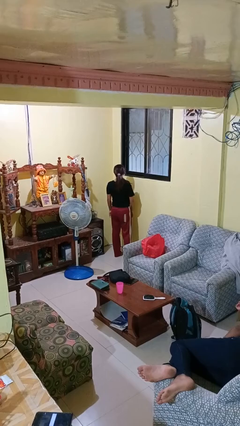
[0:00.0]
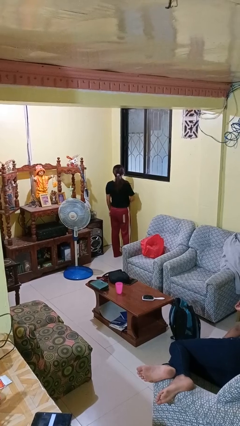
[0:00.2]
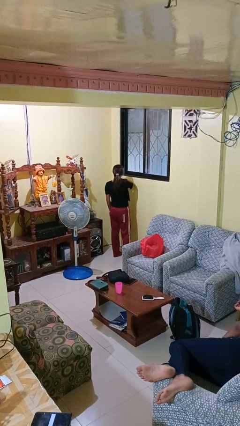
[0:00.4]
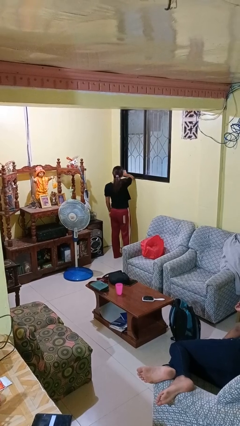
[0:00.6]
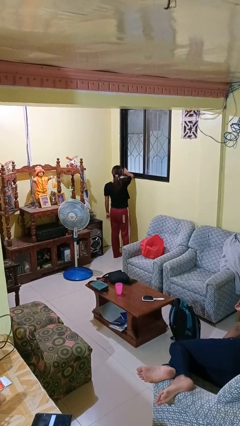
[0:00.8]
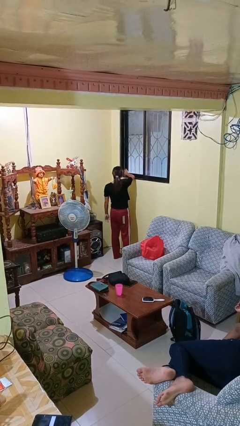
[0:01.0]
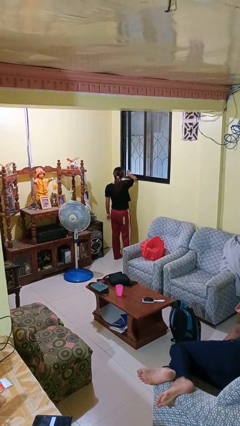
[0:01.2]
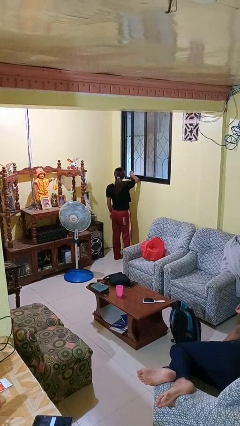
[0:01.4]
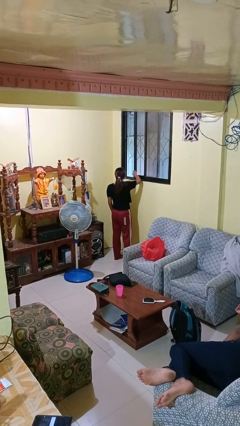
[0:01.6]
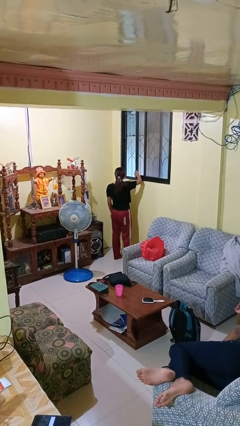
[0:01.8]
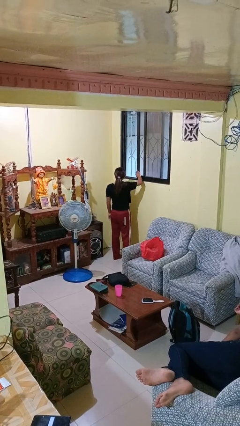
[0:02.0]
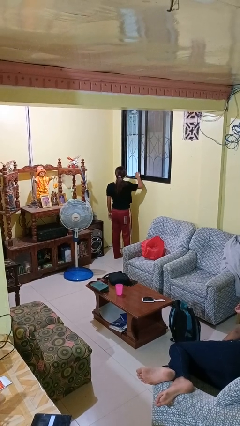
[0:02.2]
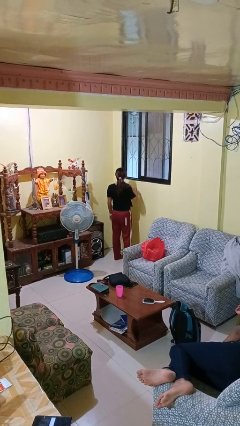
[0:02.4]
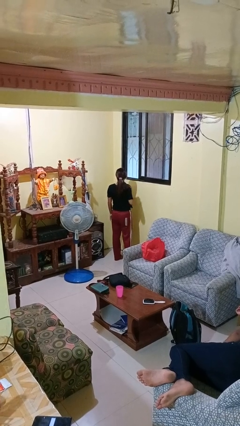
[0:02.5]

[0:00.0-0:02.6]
person opens home window

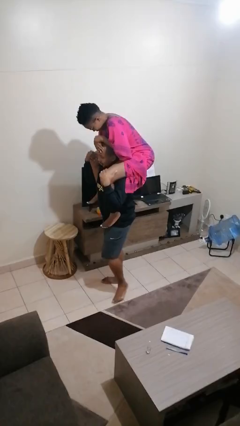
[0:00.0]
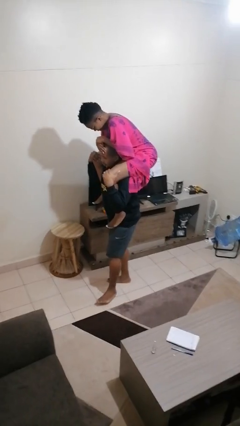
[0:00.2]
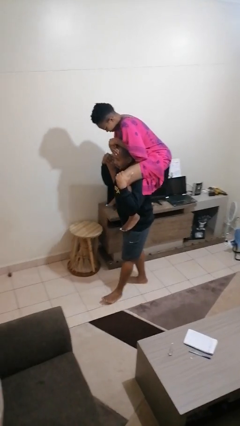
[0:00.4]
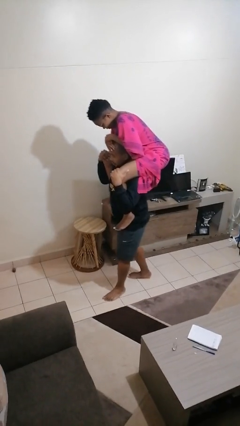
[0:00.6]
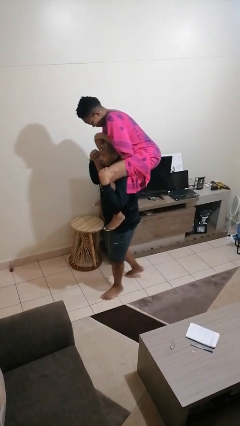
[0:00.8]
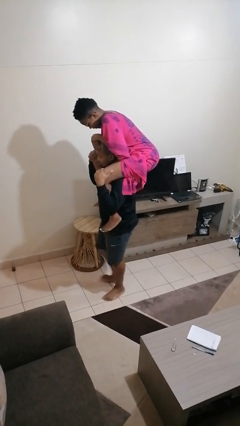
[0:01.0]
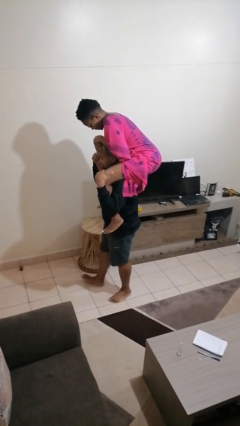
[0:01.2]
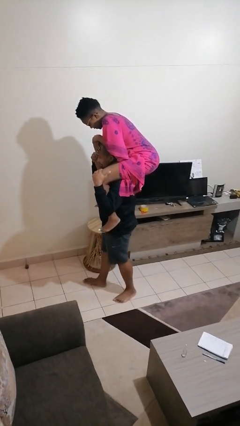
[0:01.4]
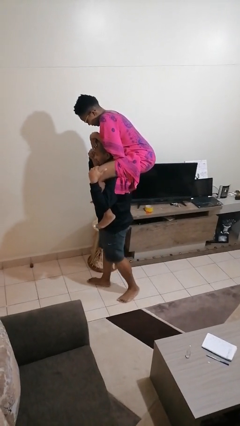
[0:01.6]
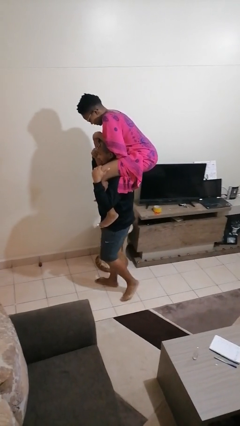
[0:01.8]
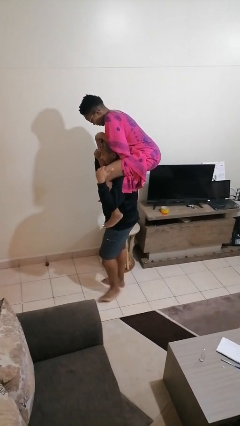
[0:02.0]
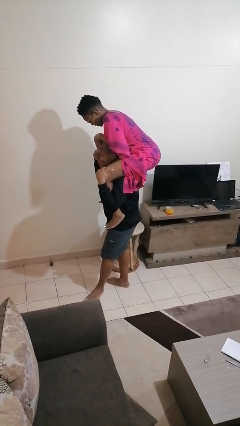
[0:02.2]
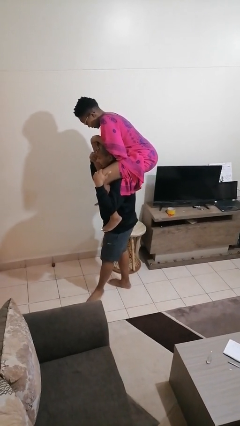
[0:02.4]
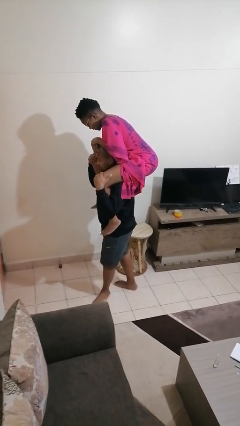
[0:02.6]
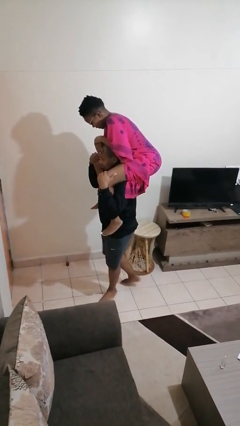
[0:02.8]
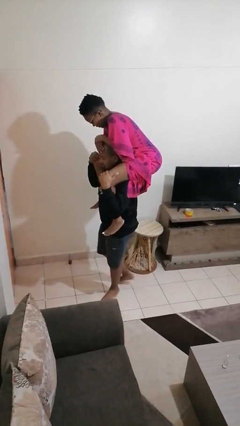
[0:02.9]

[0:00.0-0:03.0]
person carries person on shoulders

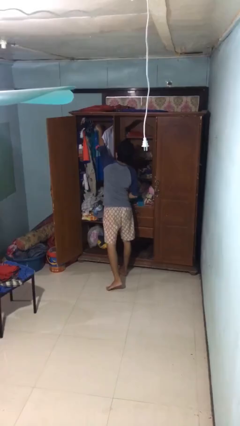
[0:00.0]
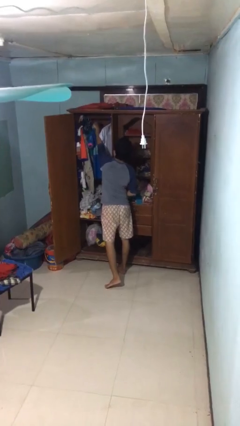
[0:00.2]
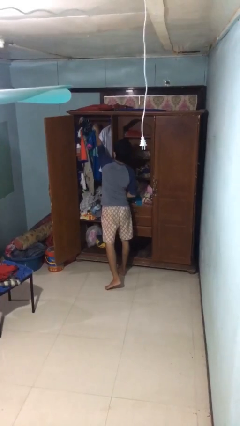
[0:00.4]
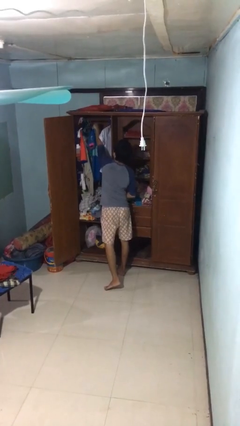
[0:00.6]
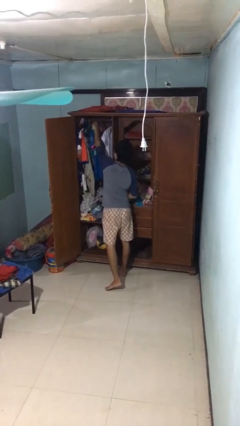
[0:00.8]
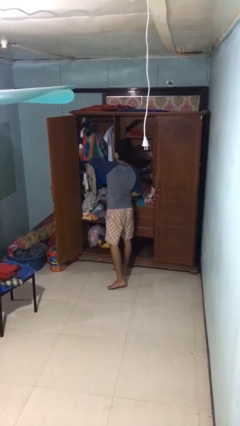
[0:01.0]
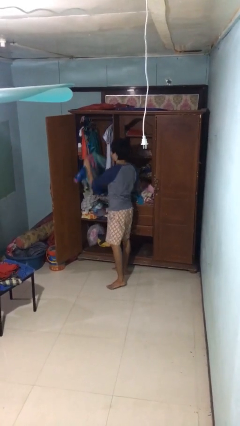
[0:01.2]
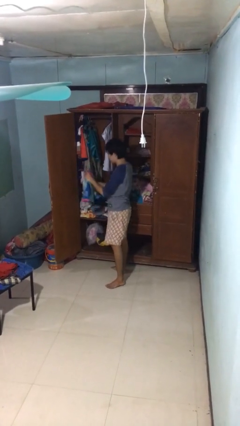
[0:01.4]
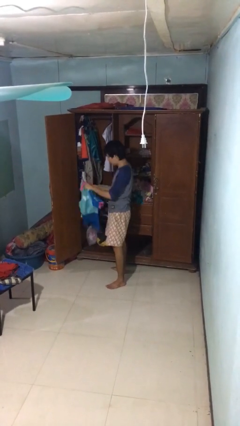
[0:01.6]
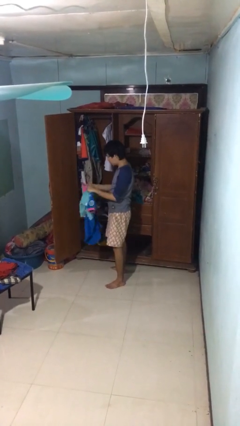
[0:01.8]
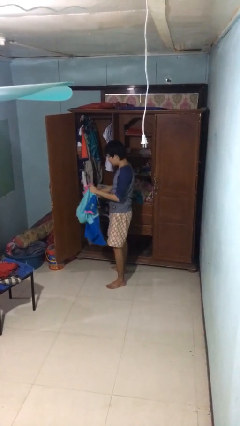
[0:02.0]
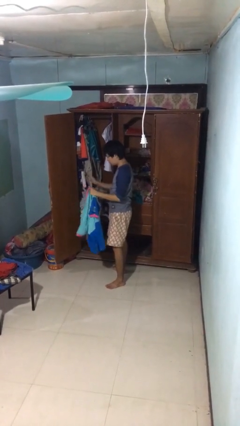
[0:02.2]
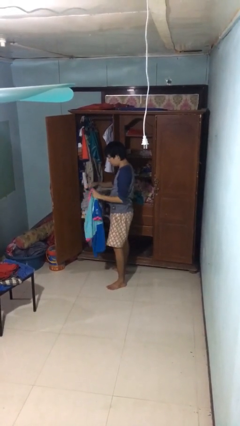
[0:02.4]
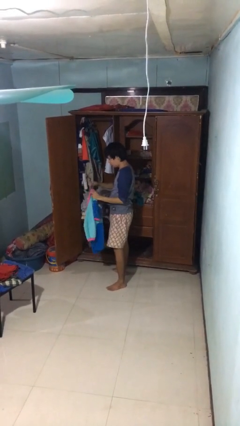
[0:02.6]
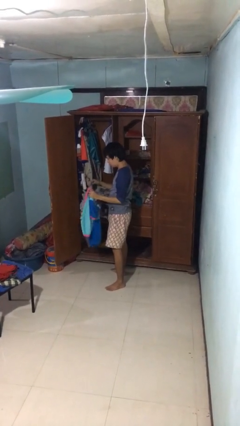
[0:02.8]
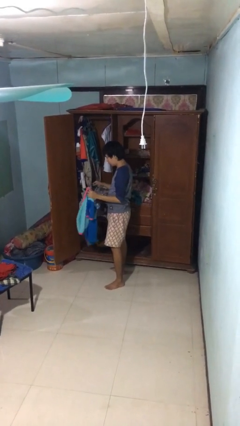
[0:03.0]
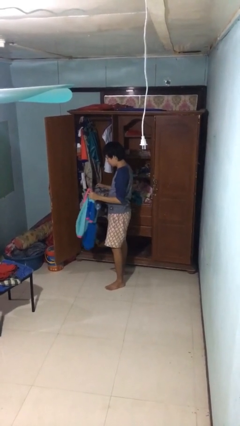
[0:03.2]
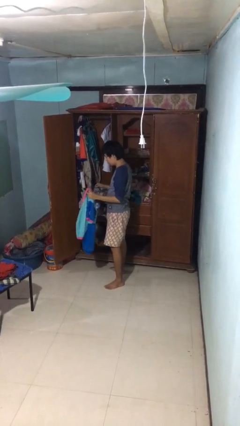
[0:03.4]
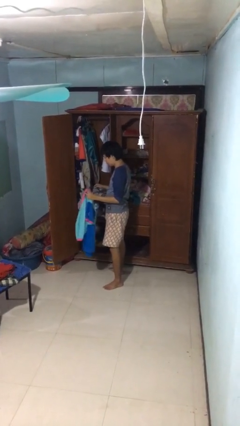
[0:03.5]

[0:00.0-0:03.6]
person takes clothes from closet

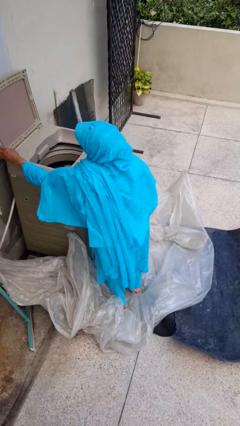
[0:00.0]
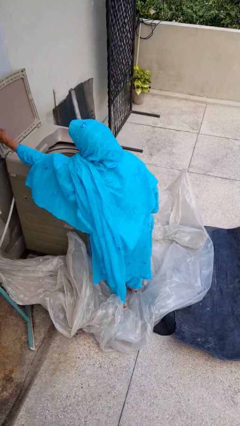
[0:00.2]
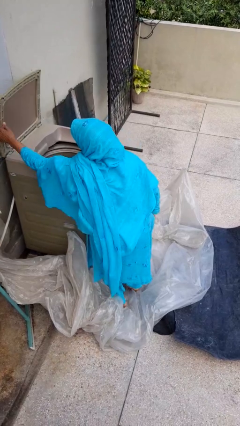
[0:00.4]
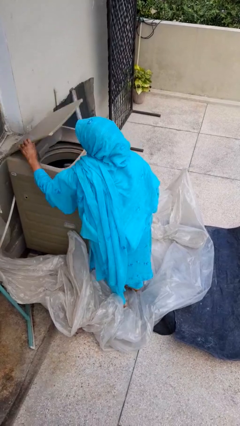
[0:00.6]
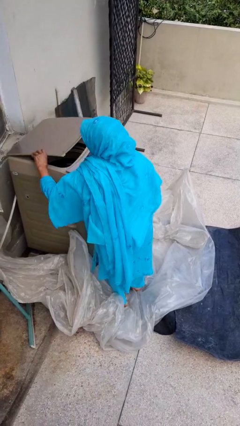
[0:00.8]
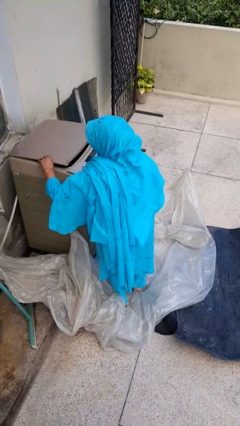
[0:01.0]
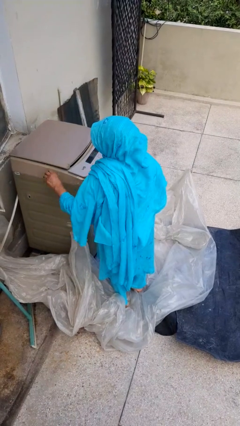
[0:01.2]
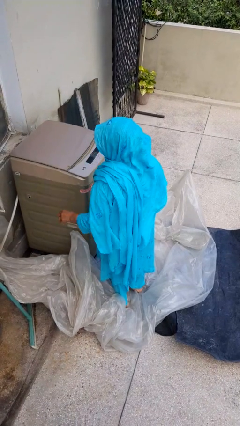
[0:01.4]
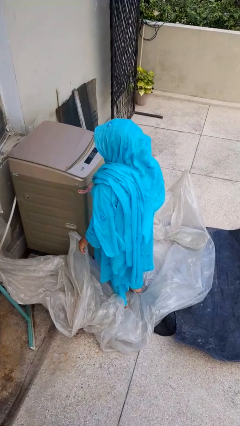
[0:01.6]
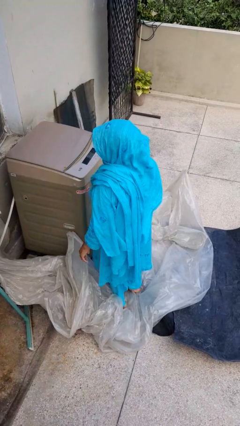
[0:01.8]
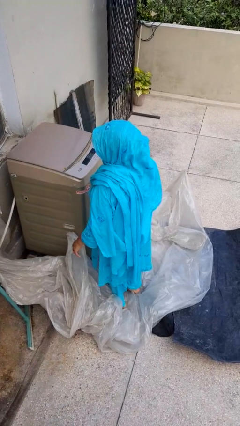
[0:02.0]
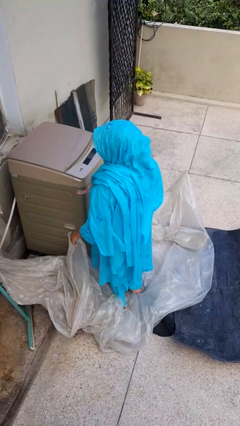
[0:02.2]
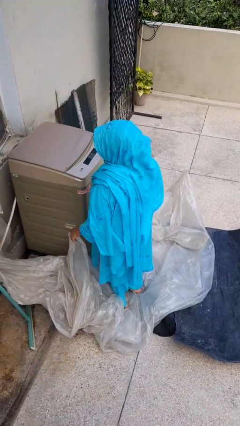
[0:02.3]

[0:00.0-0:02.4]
person closes clothes washer

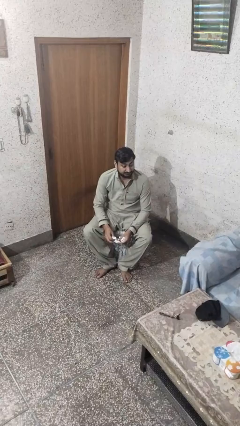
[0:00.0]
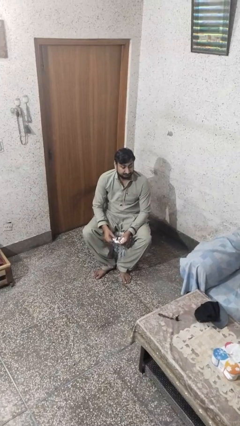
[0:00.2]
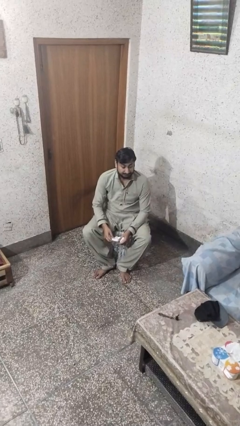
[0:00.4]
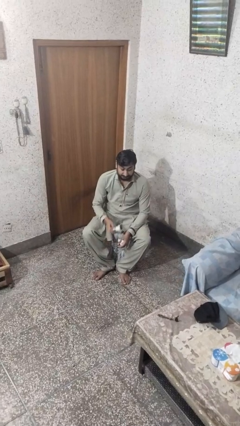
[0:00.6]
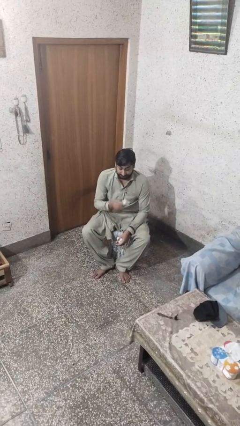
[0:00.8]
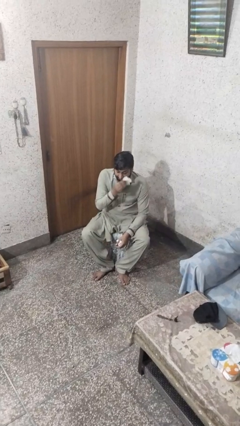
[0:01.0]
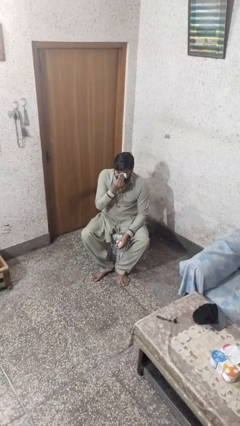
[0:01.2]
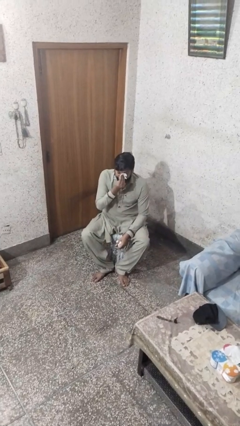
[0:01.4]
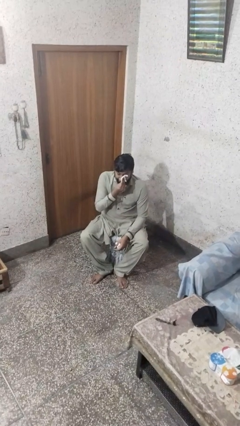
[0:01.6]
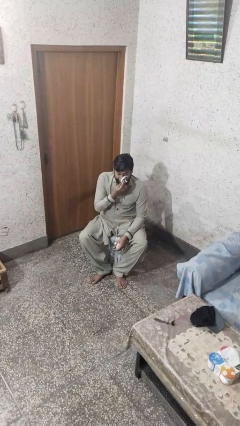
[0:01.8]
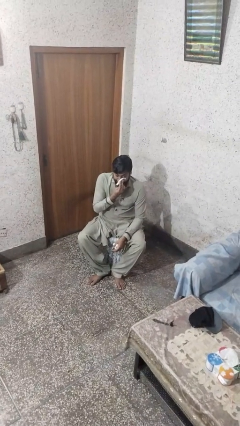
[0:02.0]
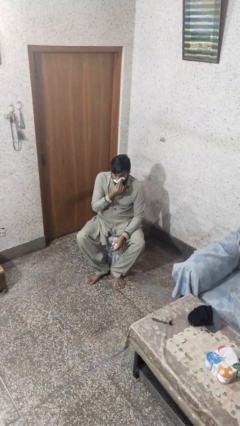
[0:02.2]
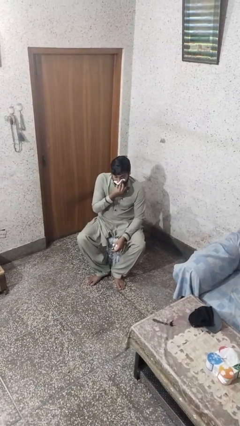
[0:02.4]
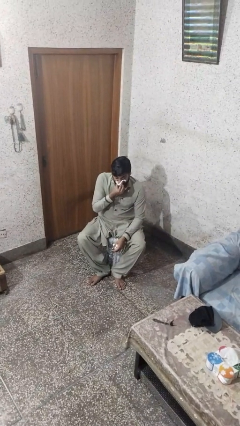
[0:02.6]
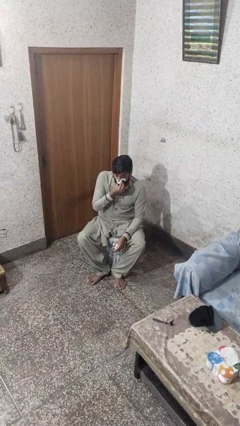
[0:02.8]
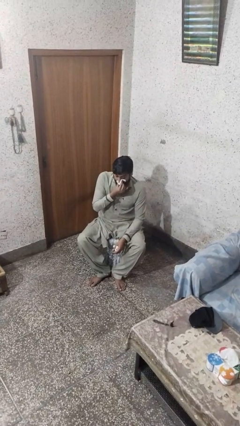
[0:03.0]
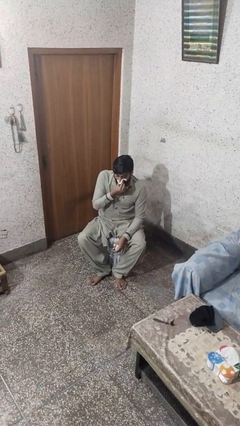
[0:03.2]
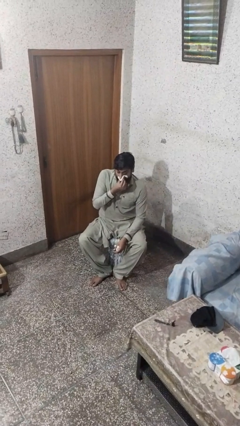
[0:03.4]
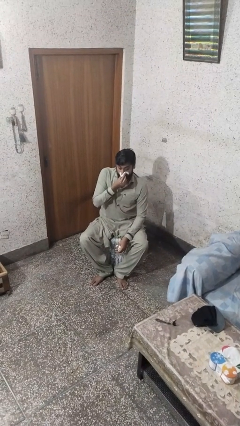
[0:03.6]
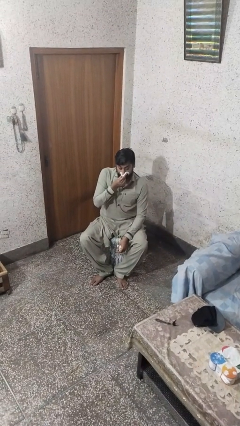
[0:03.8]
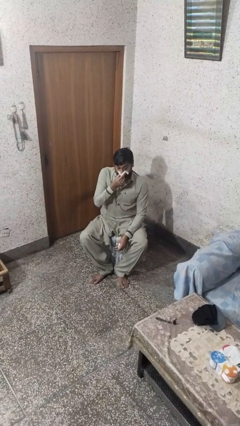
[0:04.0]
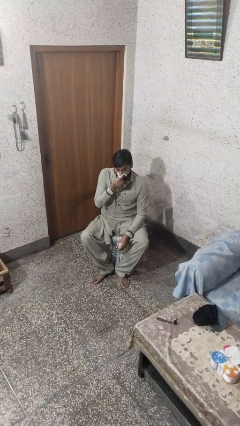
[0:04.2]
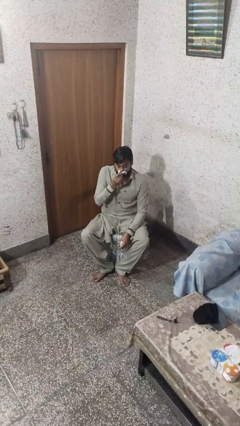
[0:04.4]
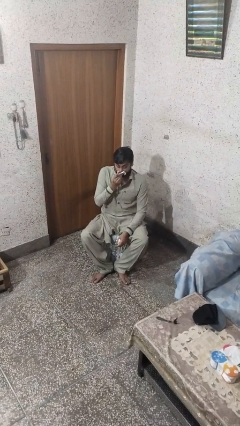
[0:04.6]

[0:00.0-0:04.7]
person blows nose

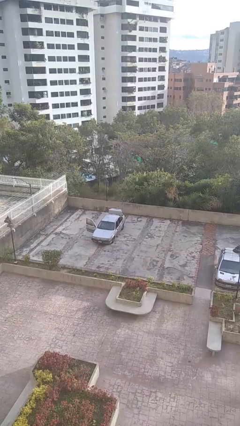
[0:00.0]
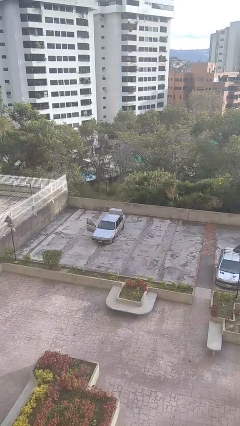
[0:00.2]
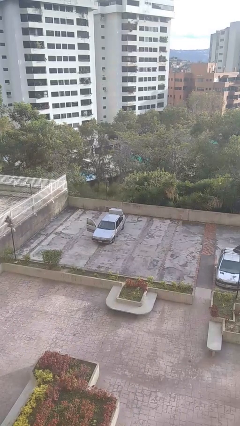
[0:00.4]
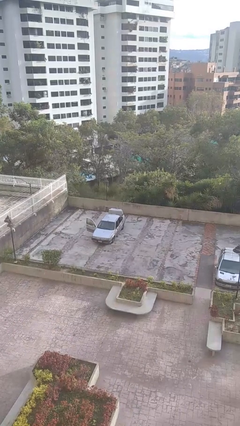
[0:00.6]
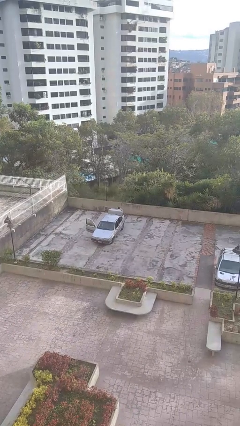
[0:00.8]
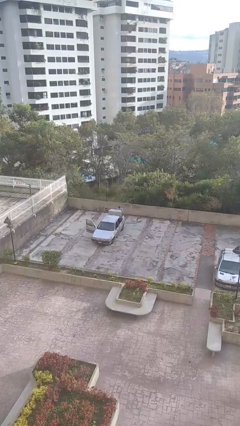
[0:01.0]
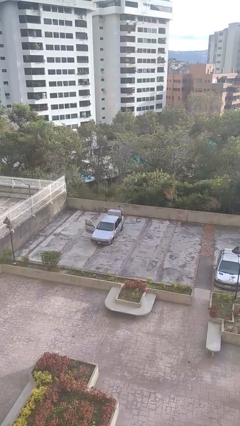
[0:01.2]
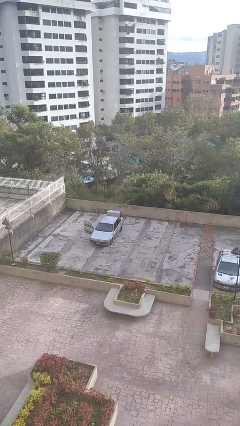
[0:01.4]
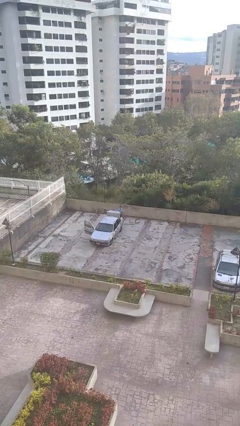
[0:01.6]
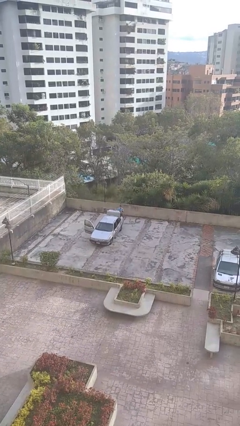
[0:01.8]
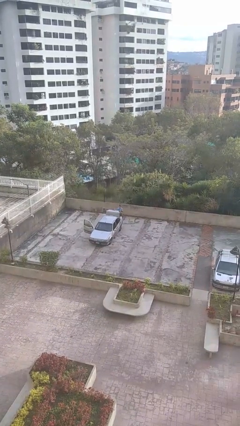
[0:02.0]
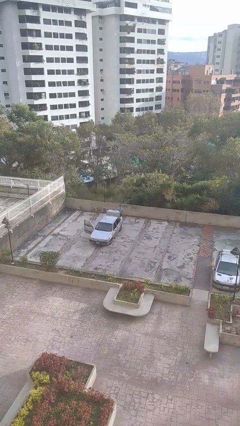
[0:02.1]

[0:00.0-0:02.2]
person unloads car
